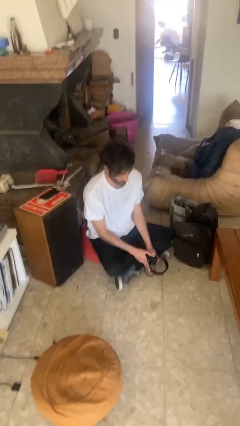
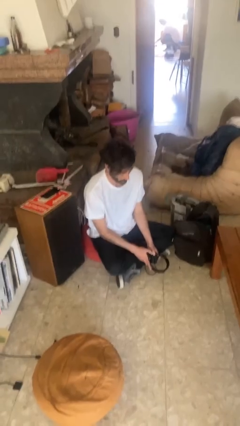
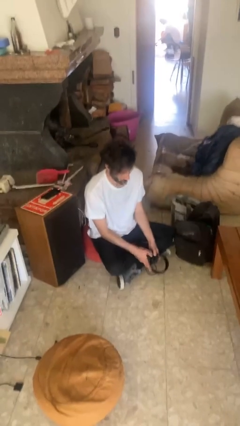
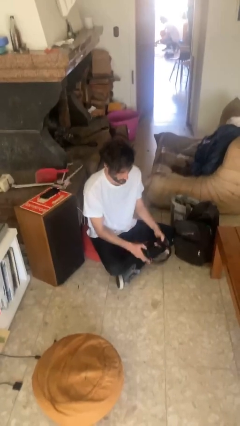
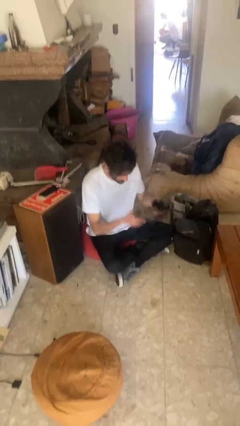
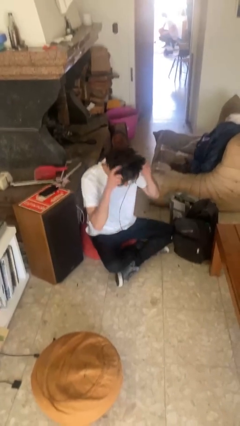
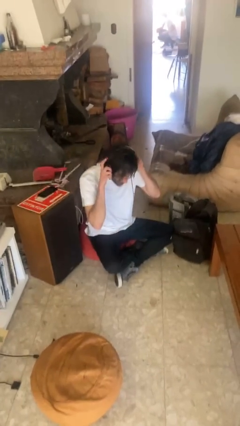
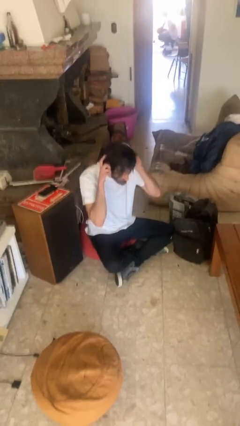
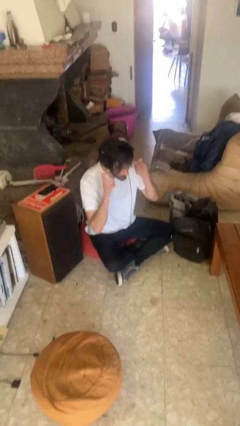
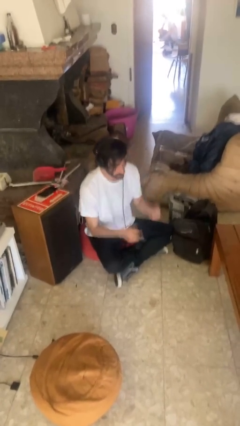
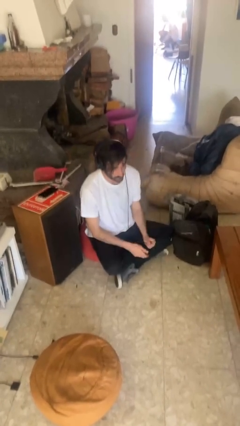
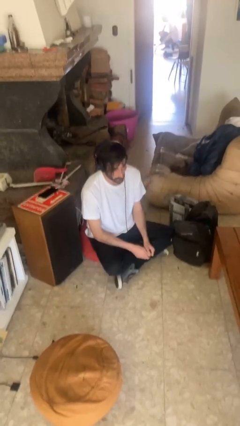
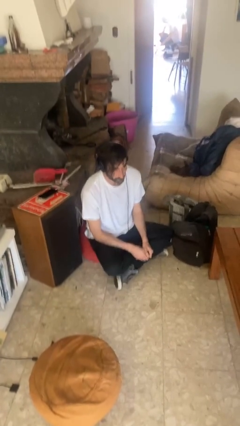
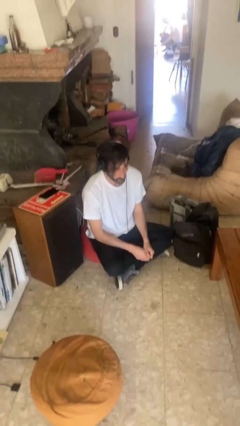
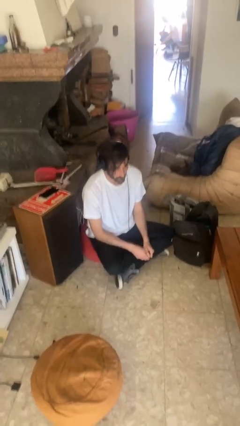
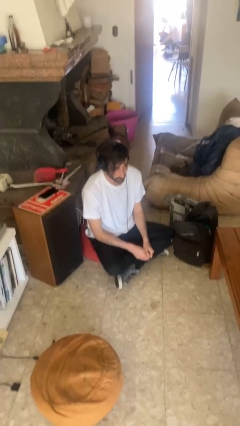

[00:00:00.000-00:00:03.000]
person puts on headphones

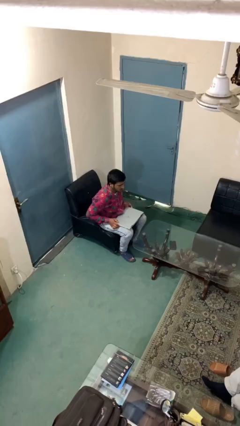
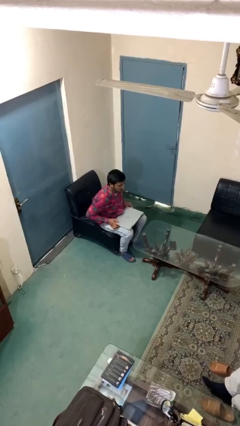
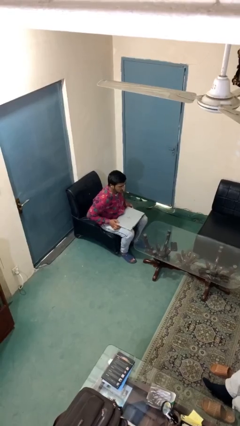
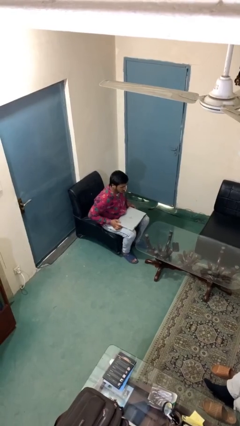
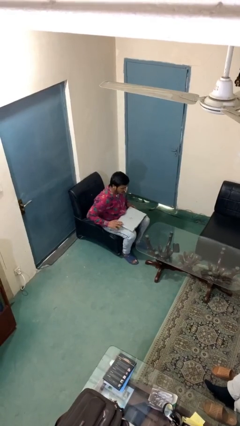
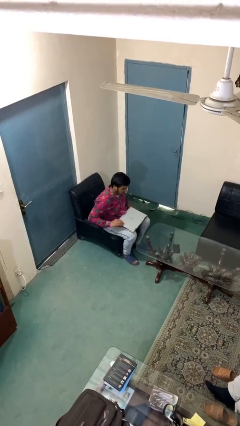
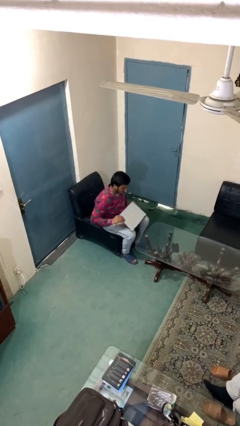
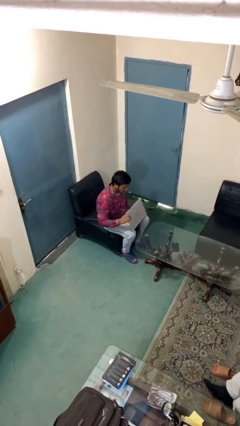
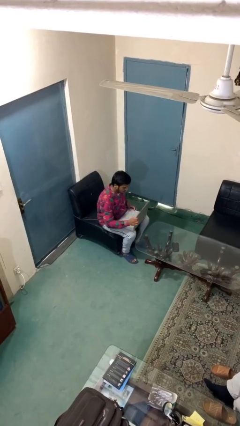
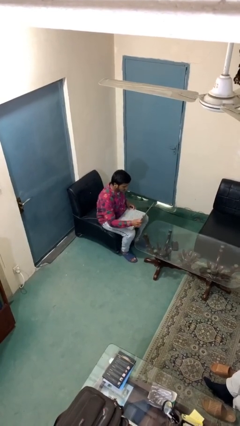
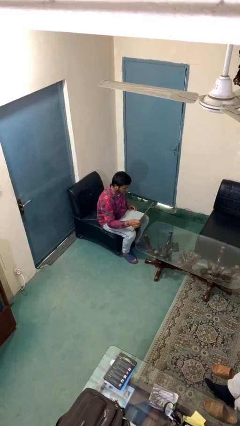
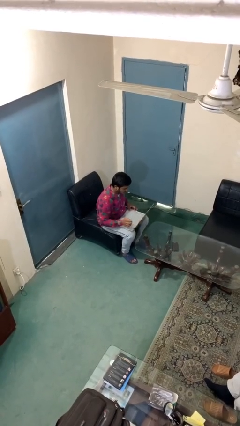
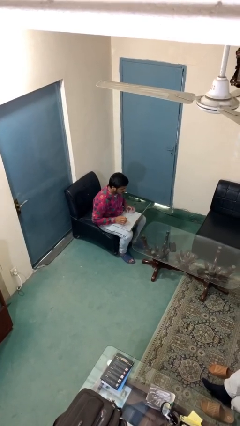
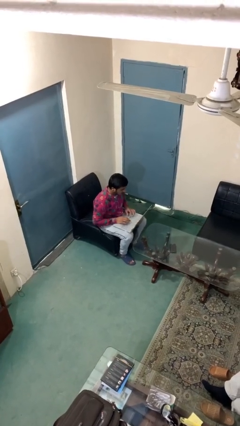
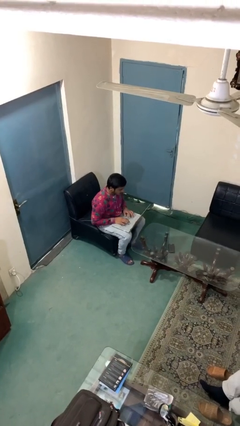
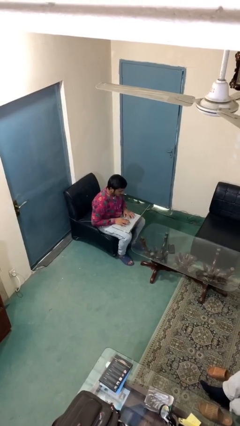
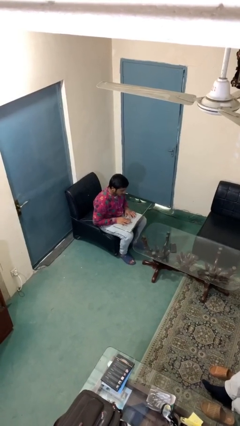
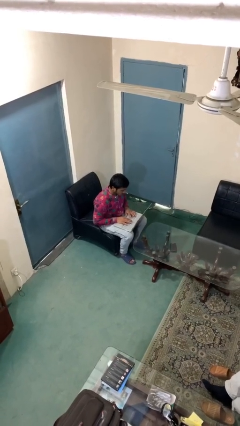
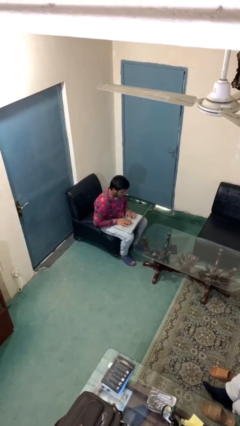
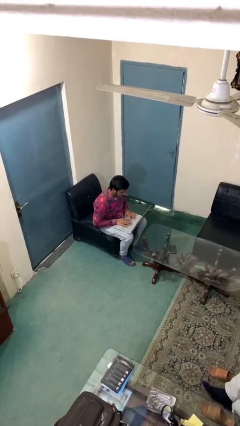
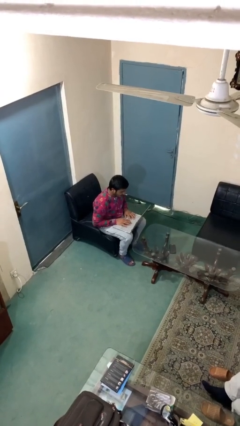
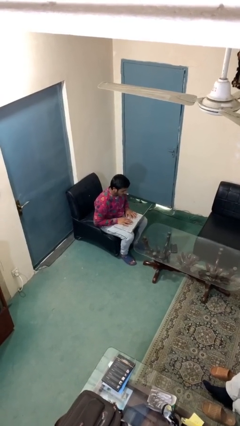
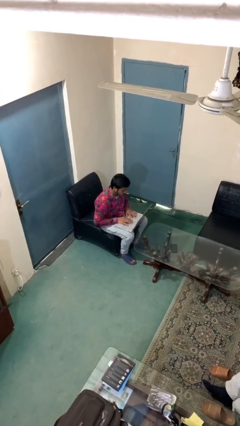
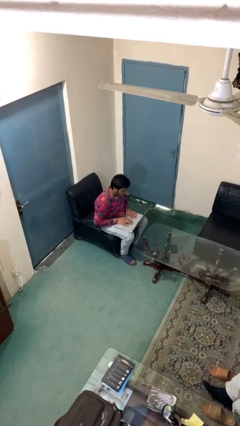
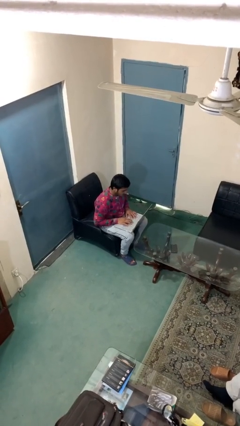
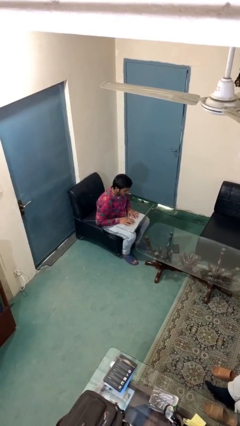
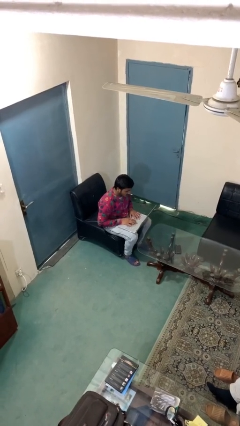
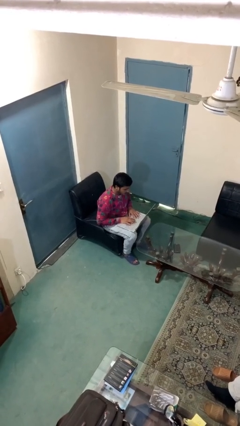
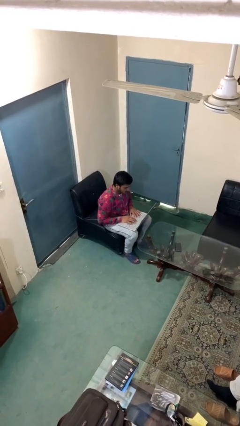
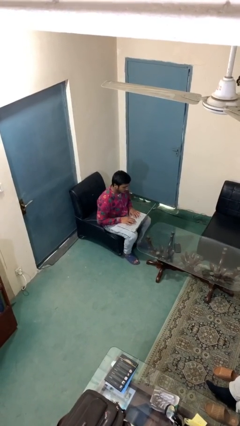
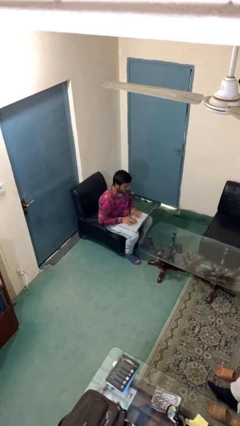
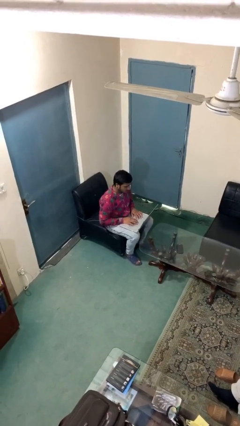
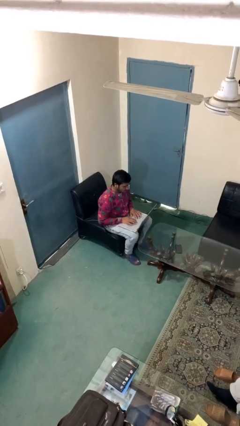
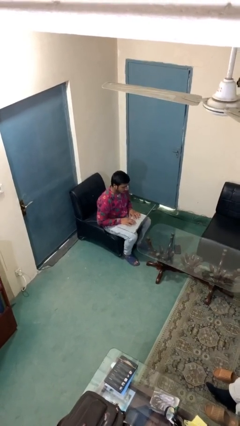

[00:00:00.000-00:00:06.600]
person interacts with laptop

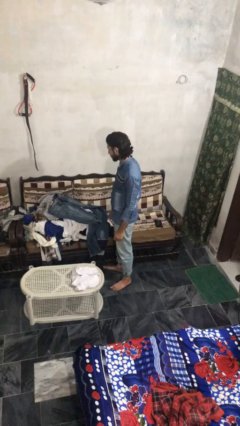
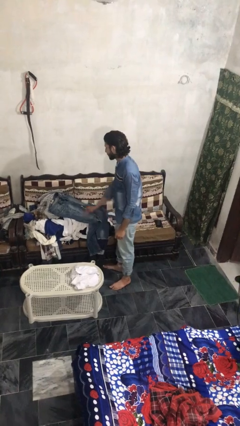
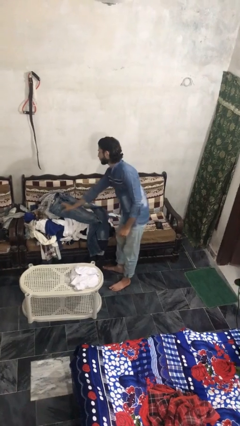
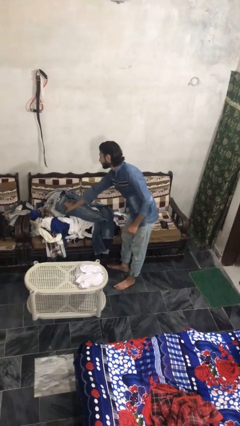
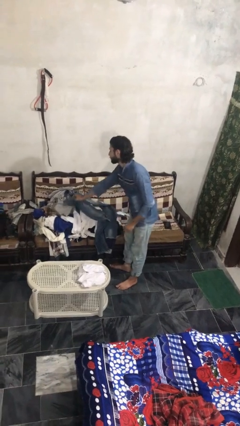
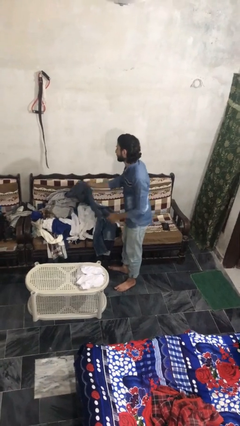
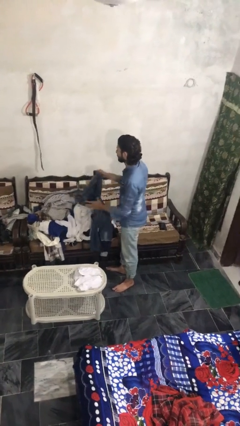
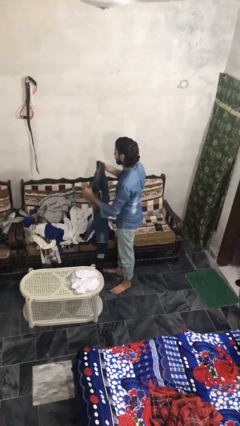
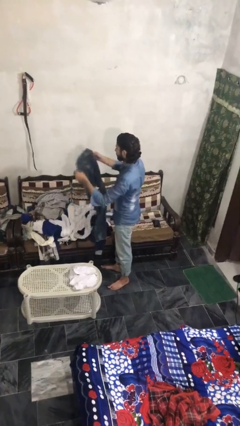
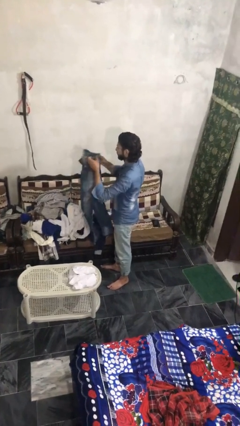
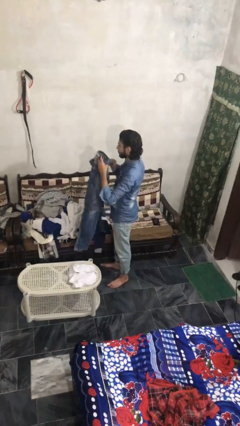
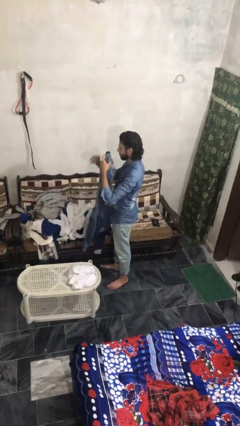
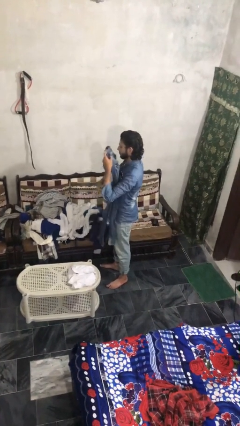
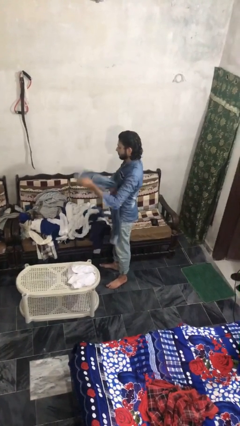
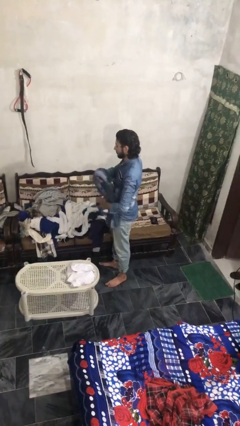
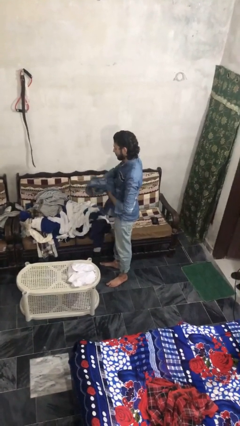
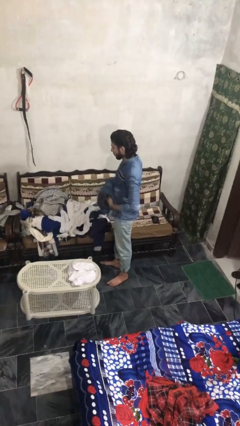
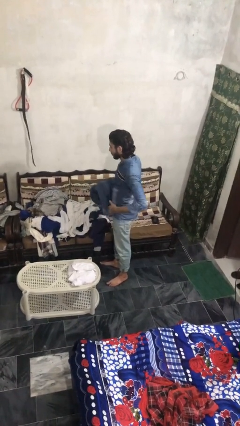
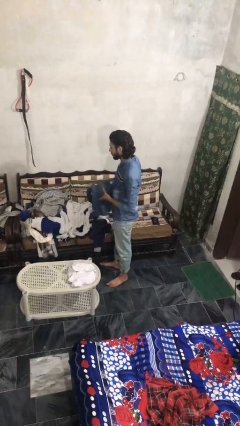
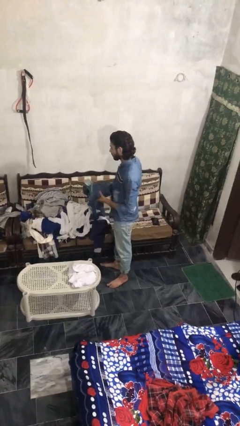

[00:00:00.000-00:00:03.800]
person folds pants

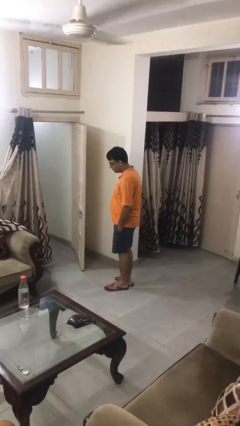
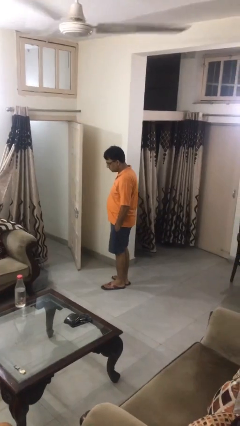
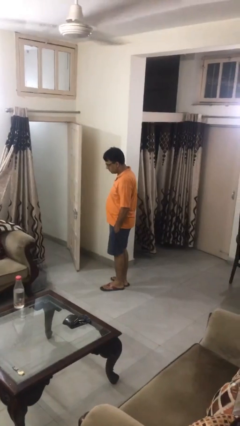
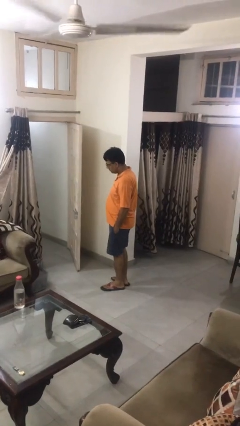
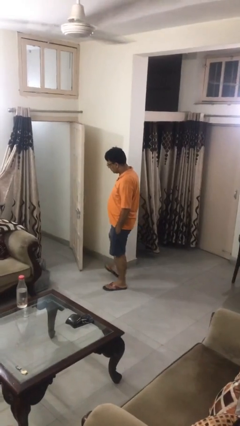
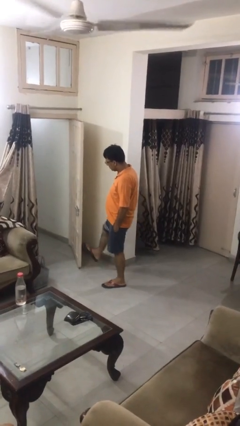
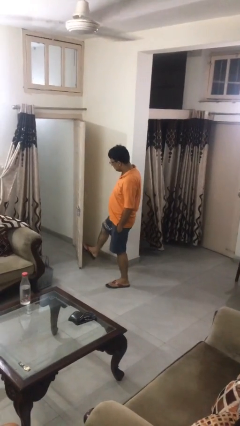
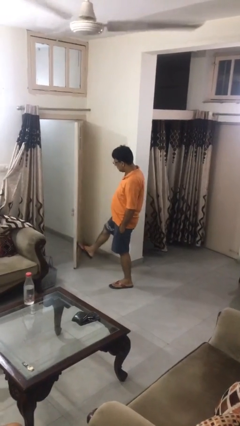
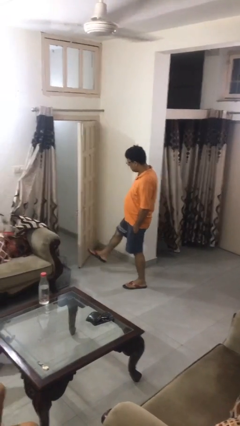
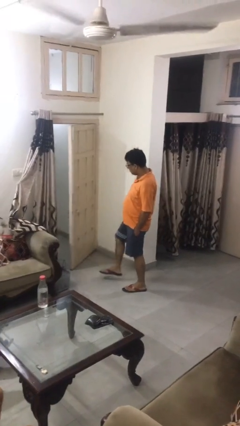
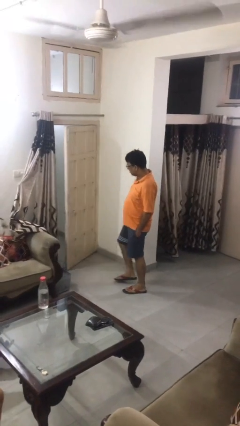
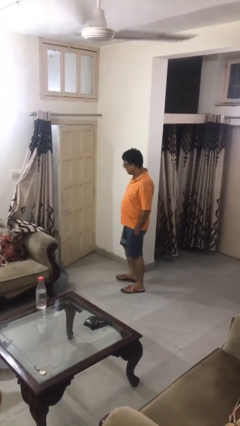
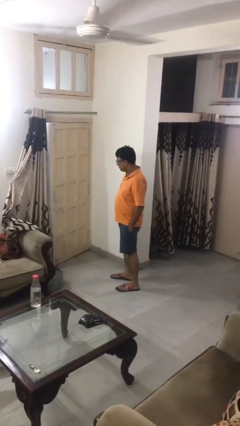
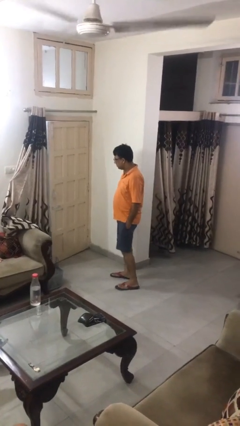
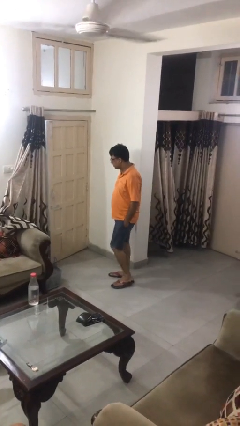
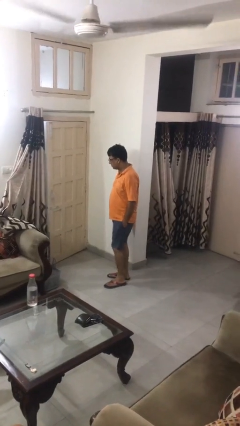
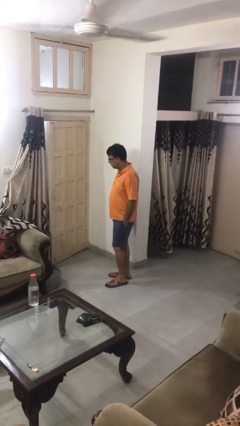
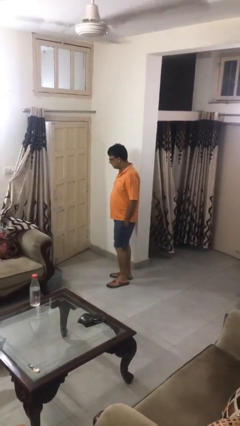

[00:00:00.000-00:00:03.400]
person closes door with foot

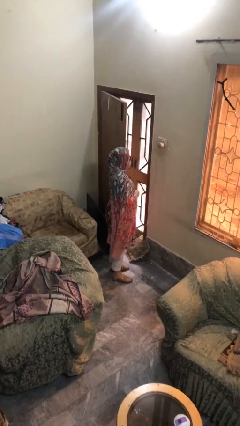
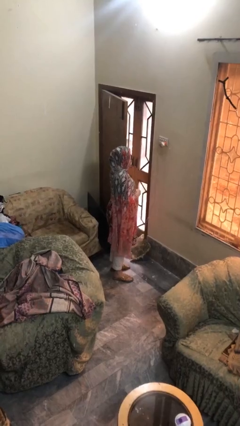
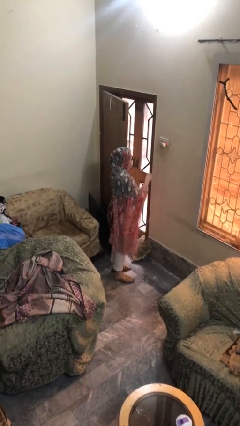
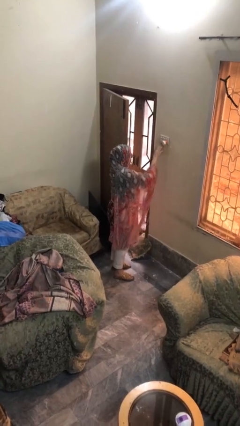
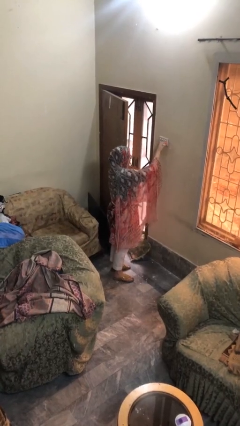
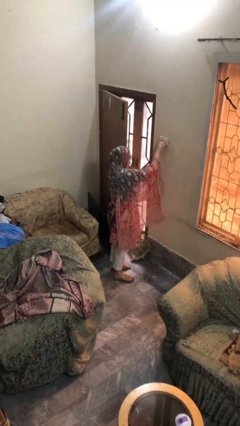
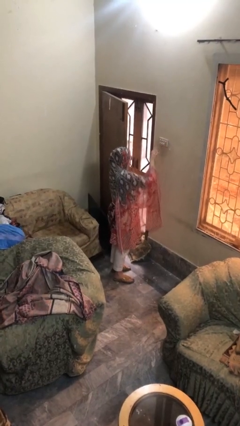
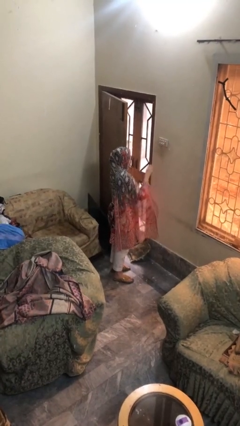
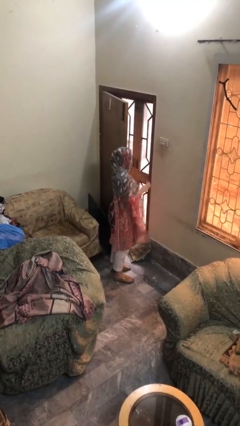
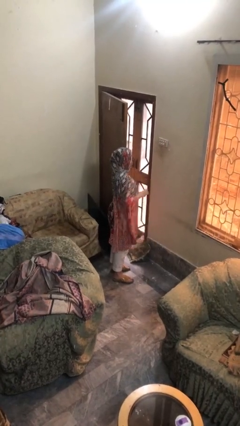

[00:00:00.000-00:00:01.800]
person unplugs from electrical socket
